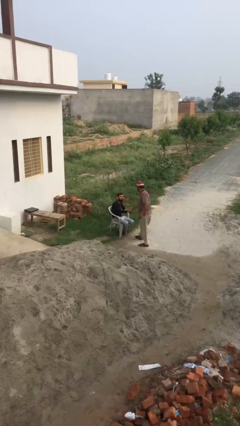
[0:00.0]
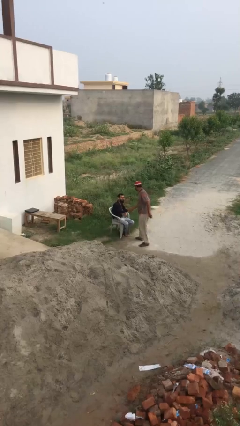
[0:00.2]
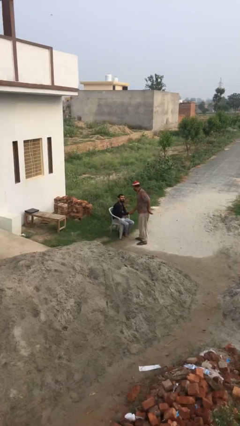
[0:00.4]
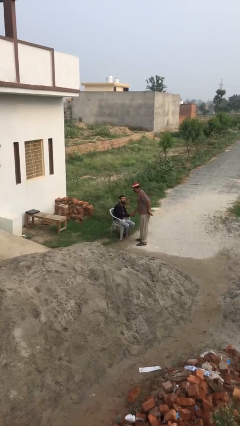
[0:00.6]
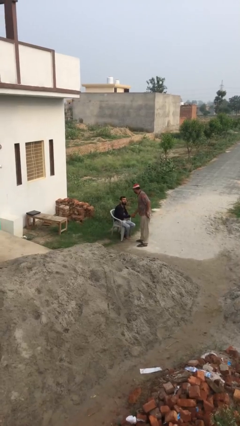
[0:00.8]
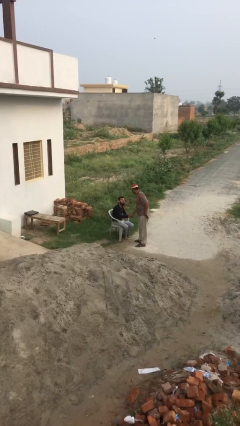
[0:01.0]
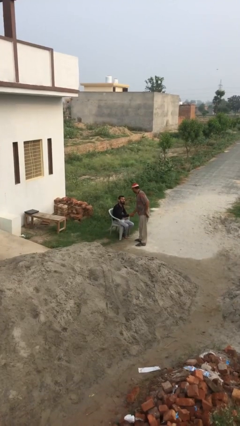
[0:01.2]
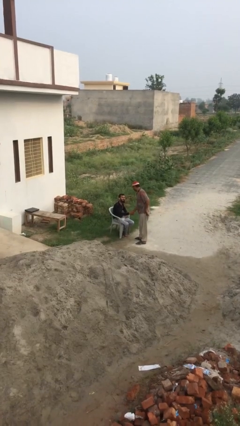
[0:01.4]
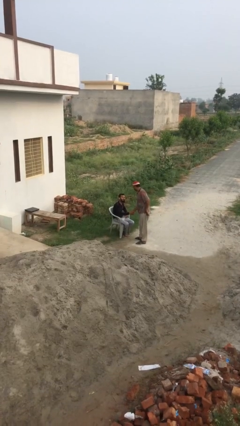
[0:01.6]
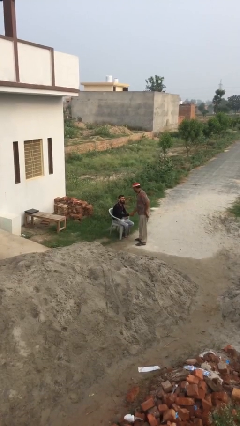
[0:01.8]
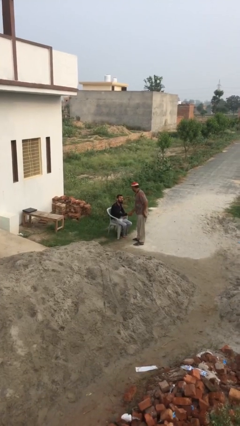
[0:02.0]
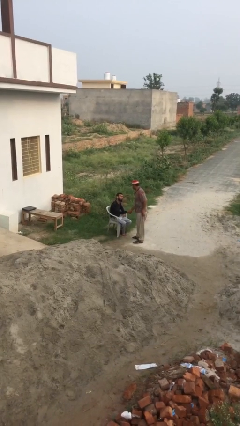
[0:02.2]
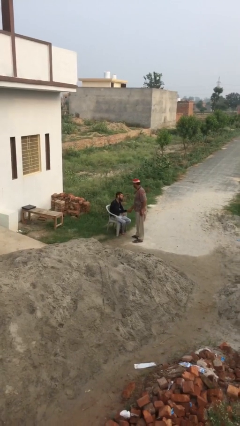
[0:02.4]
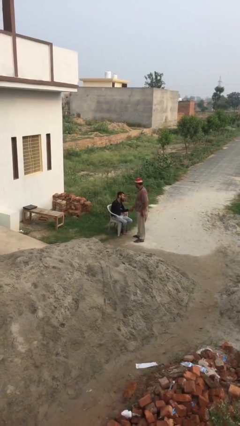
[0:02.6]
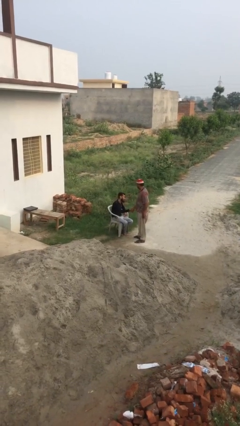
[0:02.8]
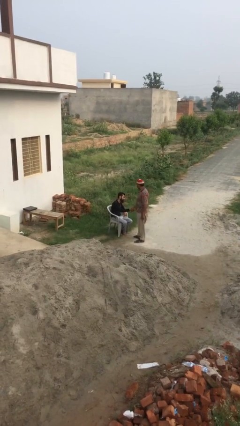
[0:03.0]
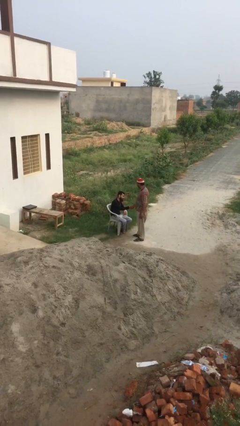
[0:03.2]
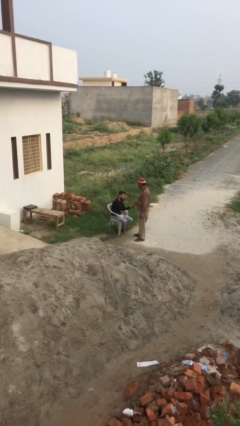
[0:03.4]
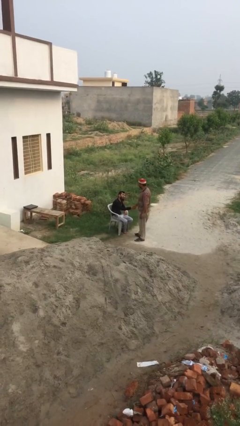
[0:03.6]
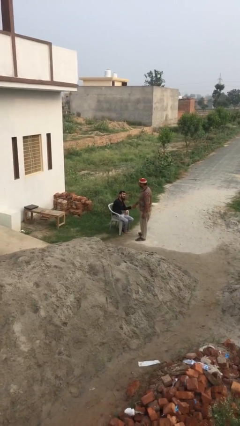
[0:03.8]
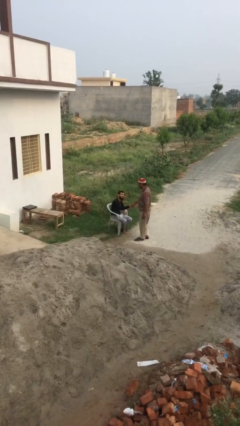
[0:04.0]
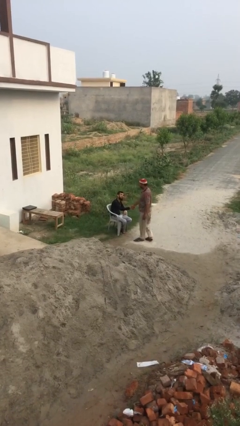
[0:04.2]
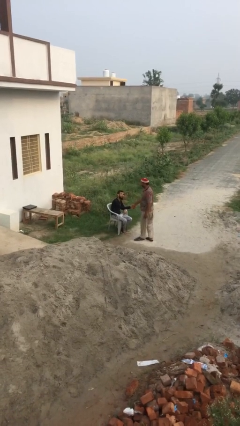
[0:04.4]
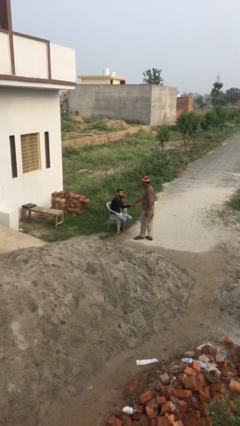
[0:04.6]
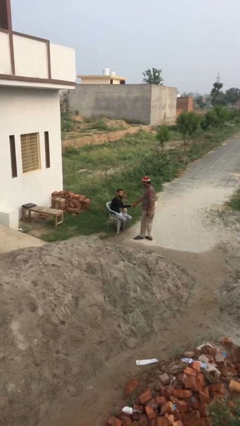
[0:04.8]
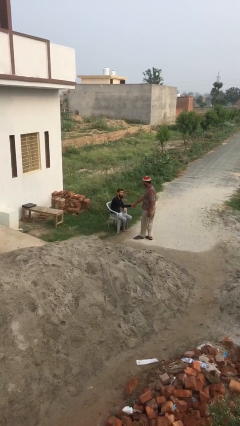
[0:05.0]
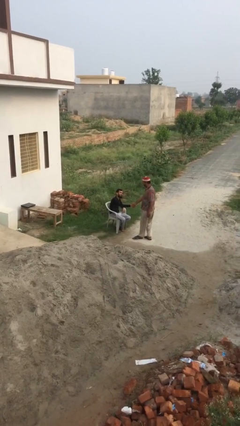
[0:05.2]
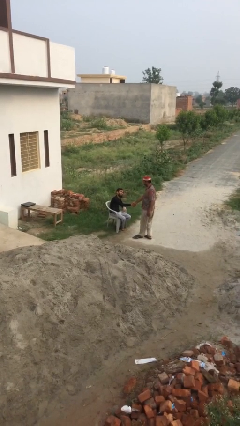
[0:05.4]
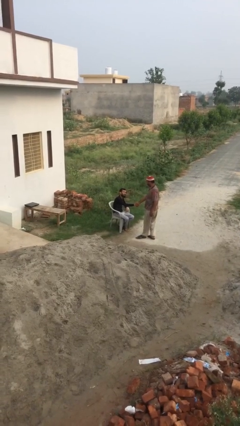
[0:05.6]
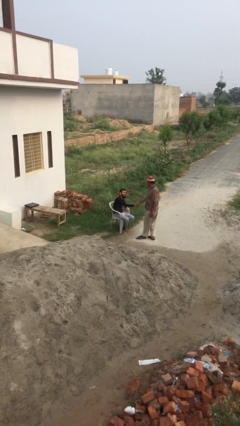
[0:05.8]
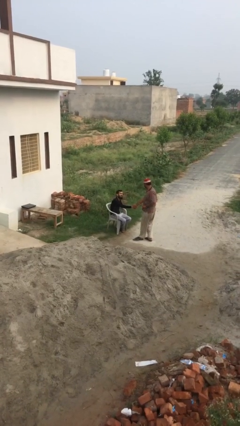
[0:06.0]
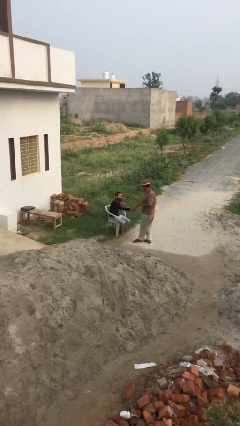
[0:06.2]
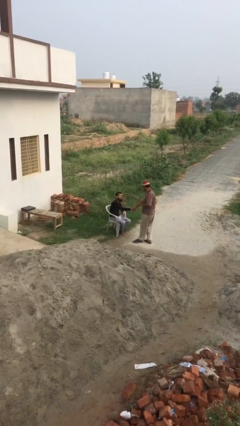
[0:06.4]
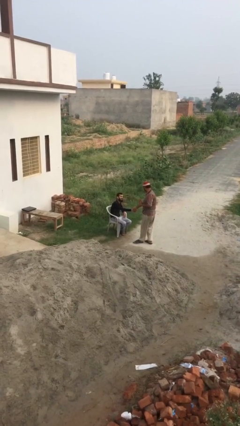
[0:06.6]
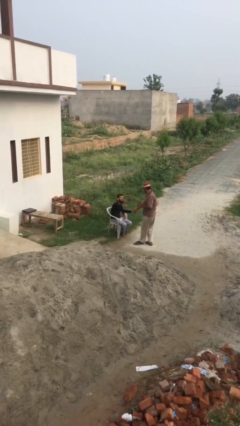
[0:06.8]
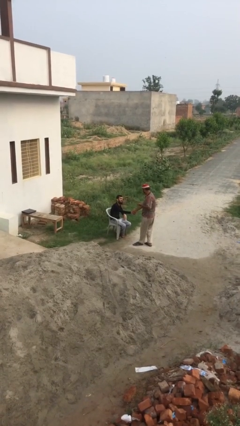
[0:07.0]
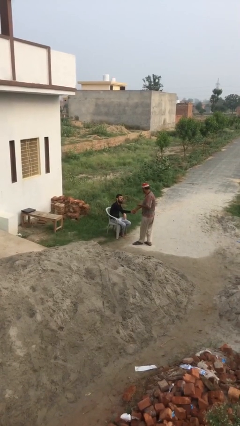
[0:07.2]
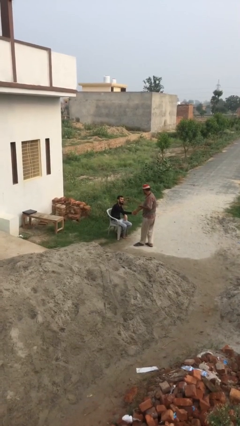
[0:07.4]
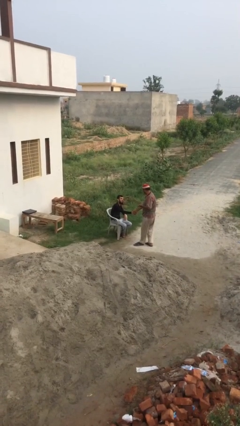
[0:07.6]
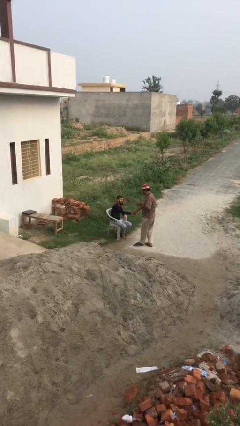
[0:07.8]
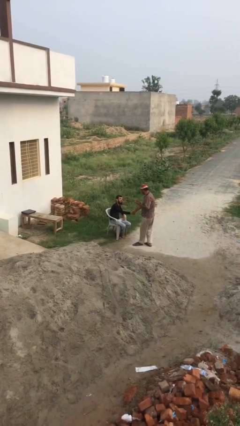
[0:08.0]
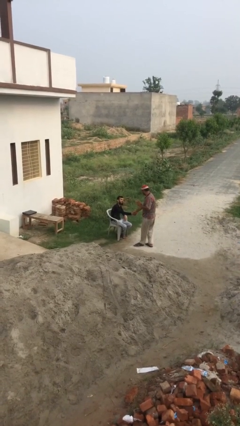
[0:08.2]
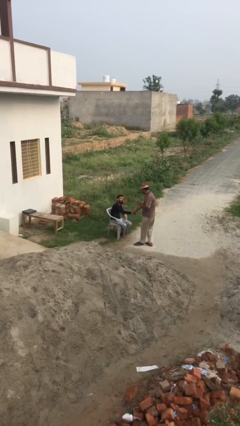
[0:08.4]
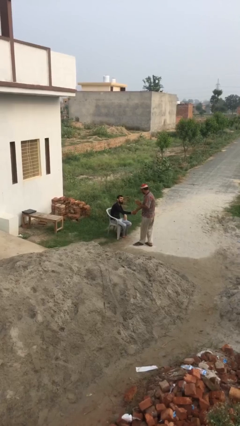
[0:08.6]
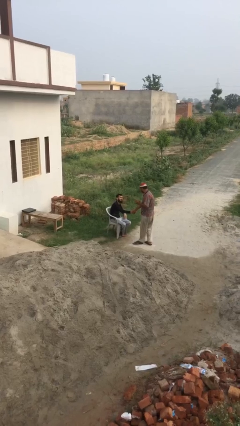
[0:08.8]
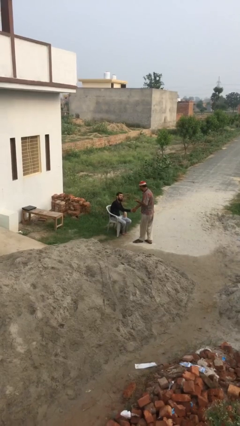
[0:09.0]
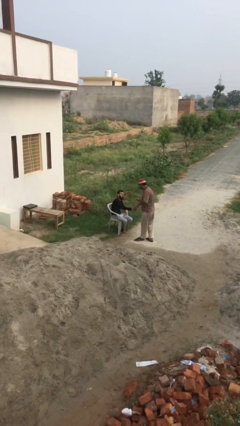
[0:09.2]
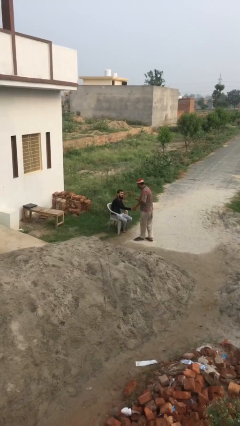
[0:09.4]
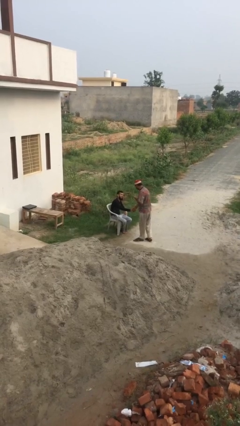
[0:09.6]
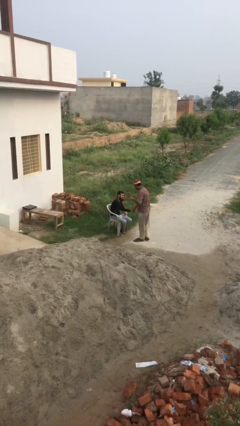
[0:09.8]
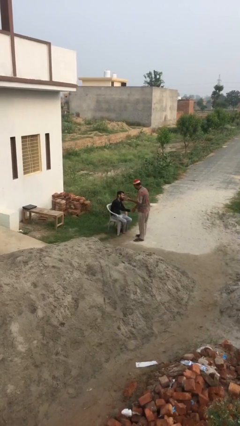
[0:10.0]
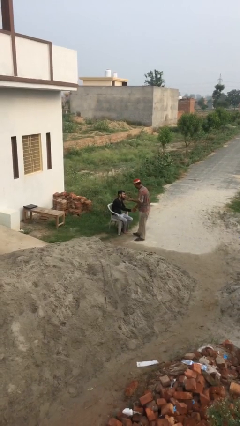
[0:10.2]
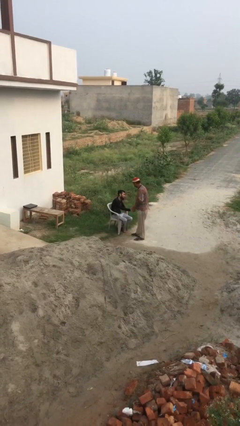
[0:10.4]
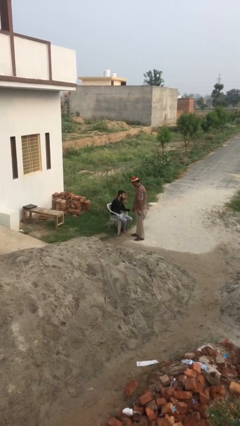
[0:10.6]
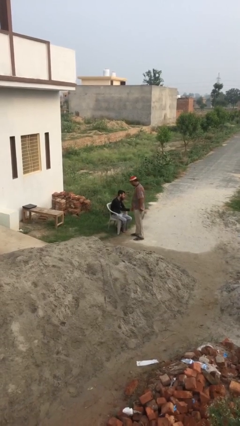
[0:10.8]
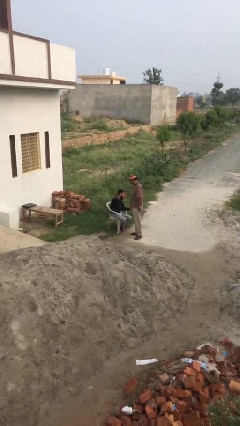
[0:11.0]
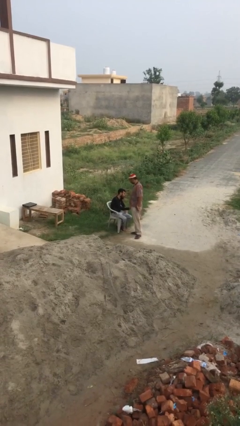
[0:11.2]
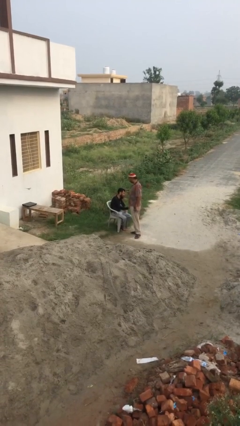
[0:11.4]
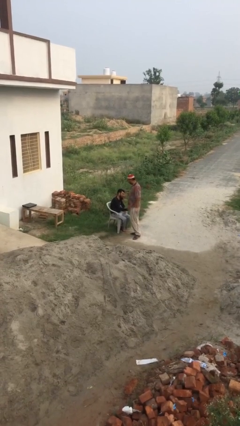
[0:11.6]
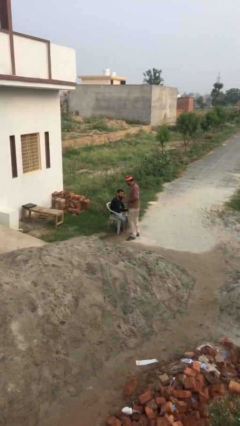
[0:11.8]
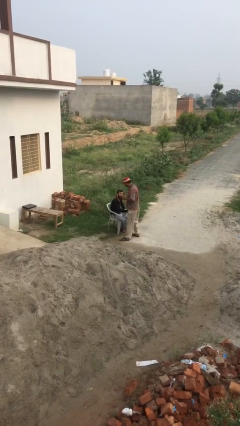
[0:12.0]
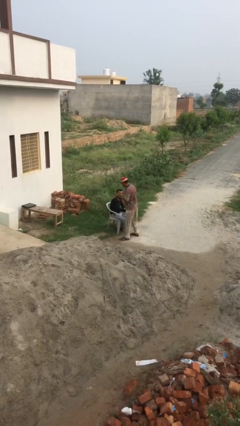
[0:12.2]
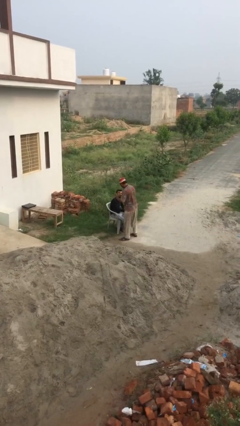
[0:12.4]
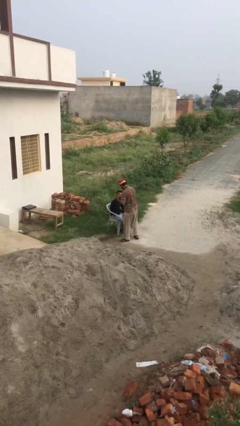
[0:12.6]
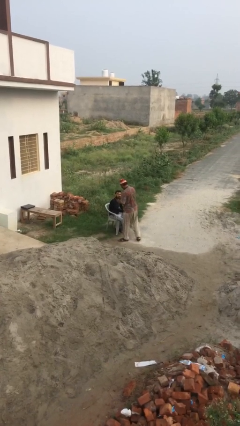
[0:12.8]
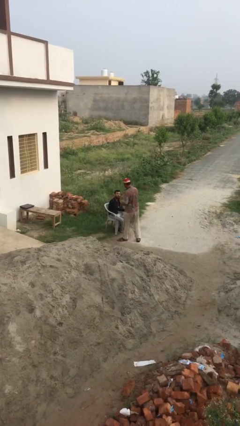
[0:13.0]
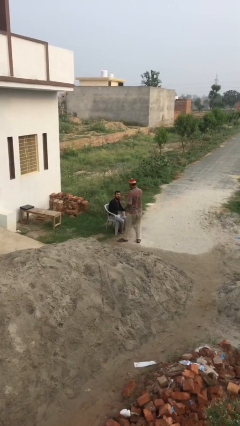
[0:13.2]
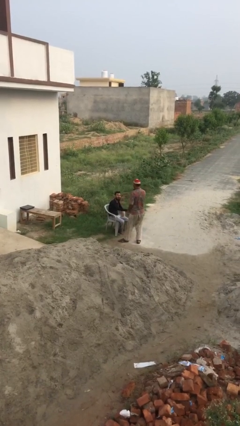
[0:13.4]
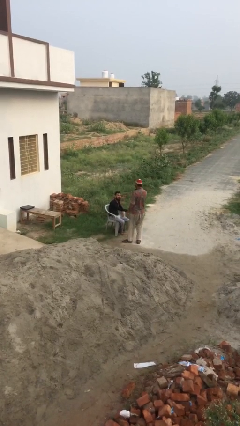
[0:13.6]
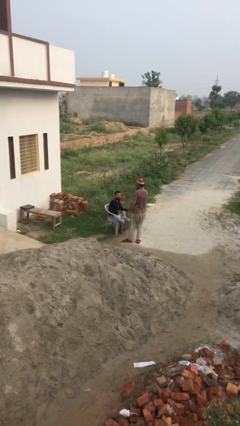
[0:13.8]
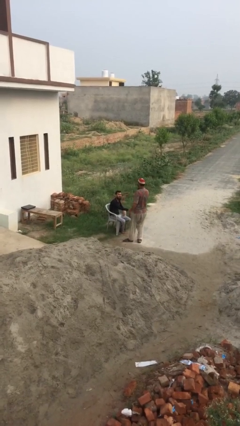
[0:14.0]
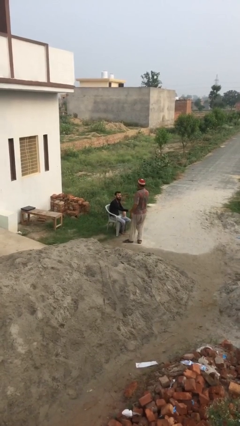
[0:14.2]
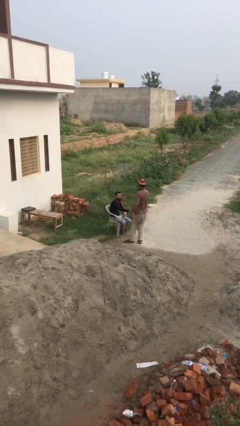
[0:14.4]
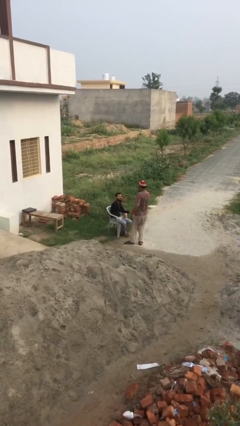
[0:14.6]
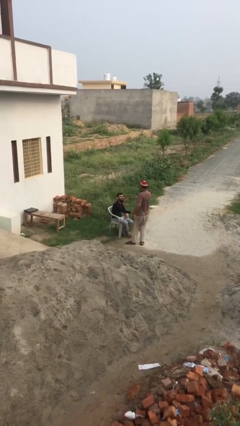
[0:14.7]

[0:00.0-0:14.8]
person shakes hand

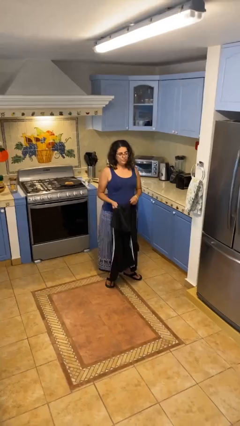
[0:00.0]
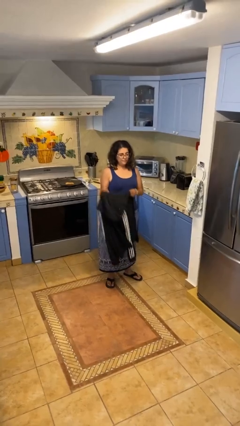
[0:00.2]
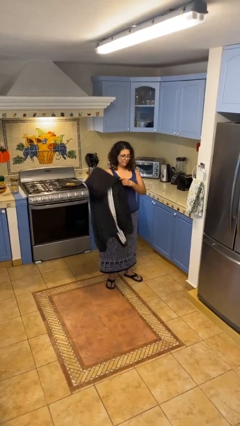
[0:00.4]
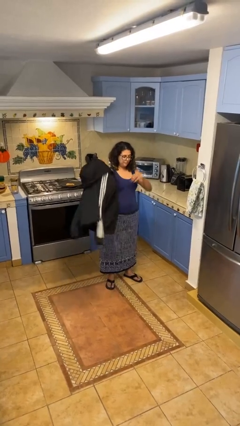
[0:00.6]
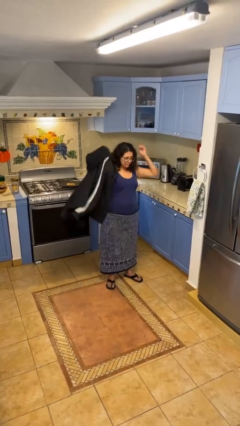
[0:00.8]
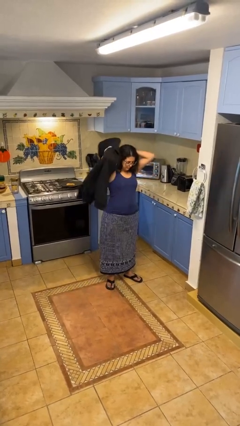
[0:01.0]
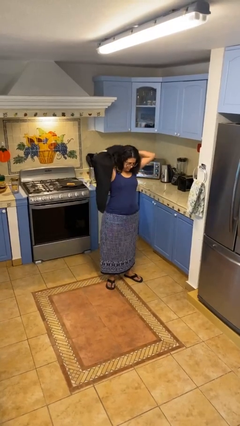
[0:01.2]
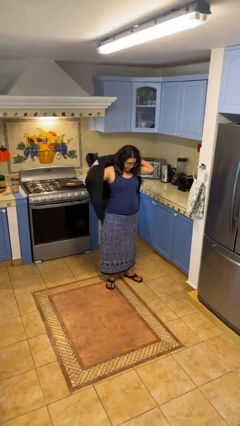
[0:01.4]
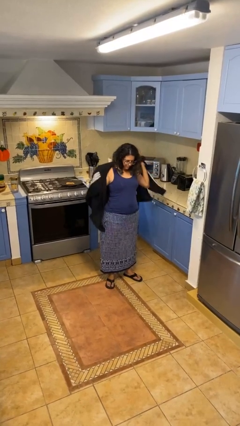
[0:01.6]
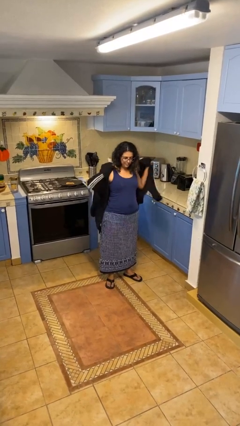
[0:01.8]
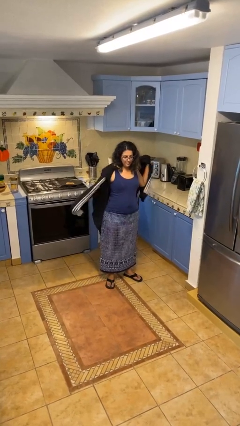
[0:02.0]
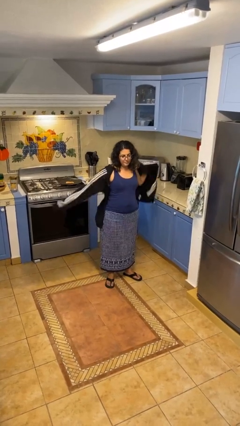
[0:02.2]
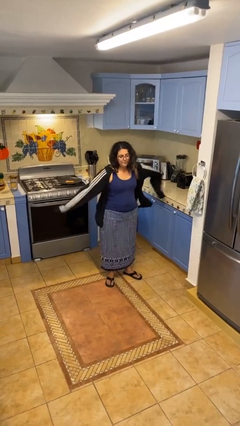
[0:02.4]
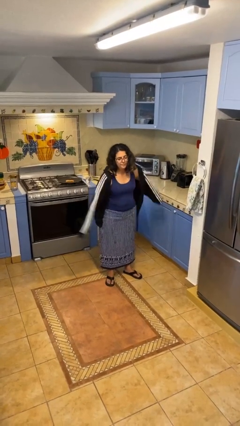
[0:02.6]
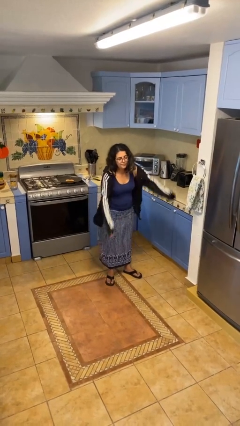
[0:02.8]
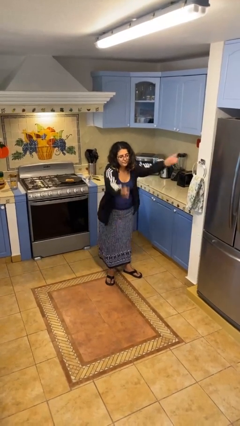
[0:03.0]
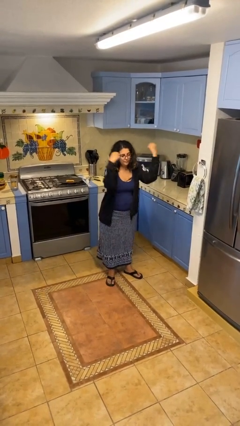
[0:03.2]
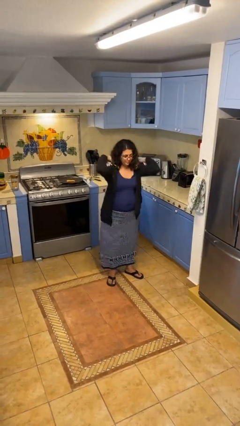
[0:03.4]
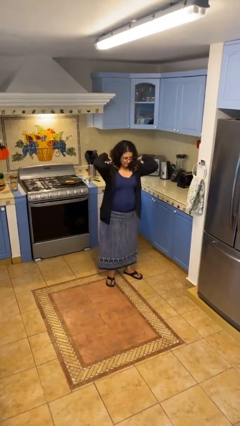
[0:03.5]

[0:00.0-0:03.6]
person puts on hoodie
